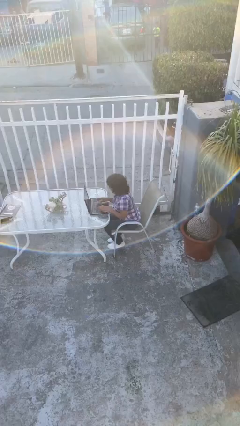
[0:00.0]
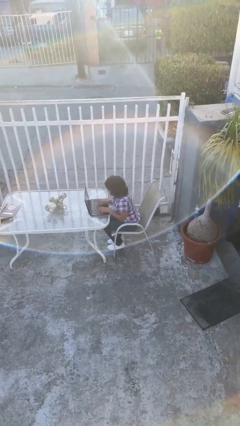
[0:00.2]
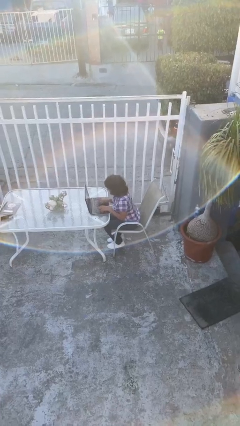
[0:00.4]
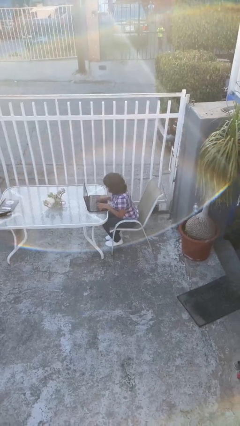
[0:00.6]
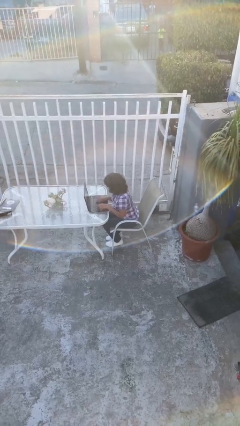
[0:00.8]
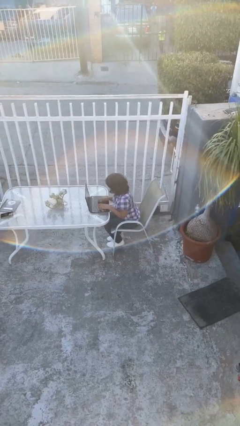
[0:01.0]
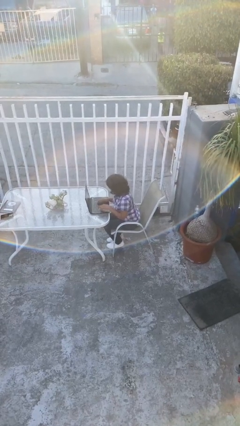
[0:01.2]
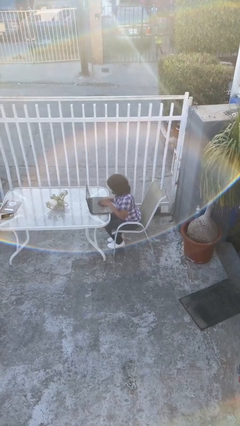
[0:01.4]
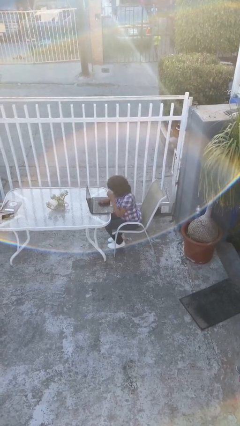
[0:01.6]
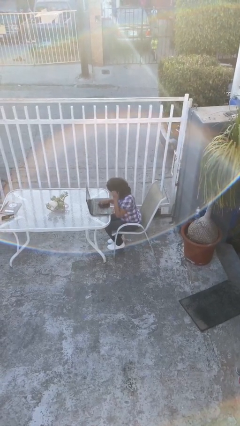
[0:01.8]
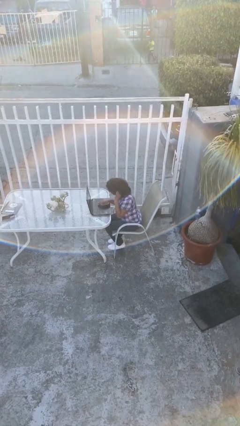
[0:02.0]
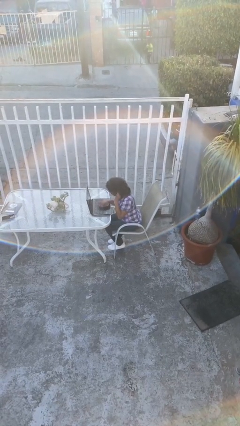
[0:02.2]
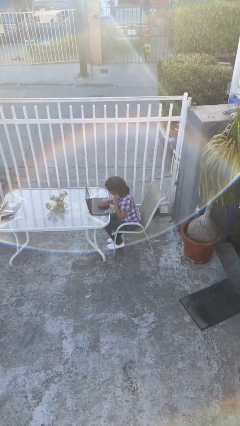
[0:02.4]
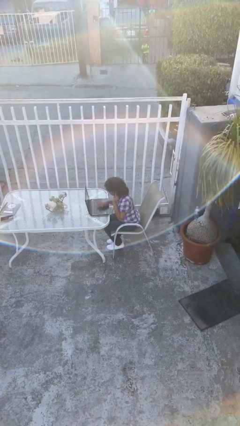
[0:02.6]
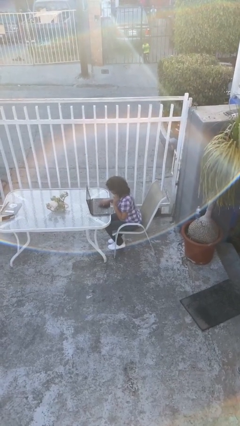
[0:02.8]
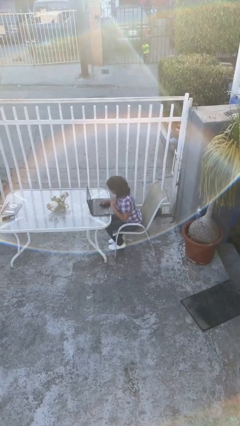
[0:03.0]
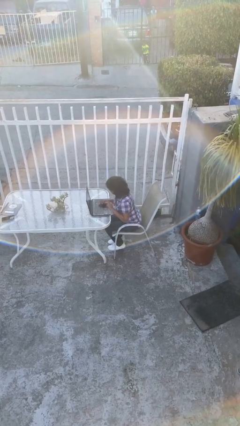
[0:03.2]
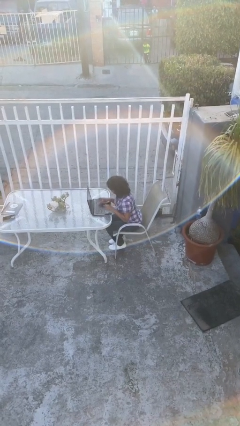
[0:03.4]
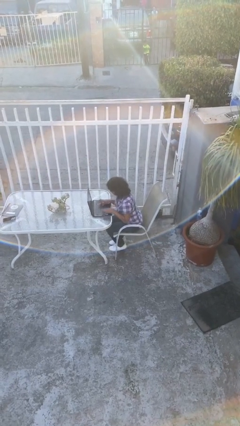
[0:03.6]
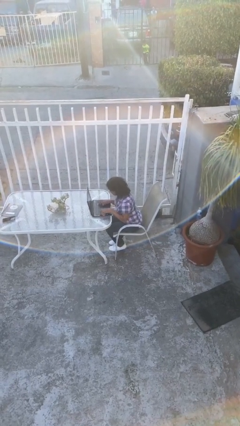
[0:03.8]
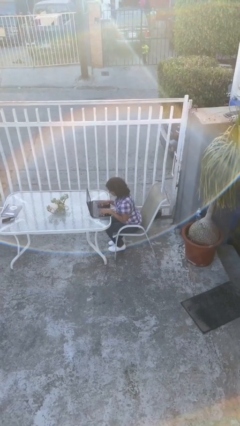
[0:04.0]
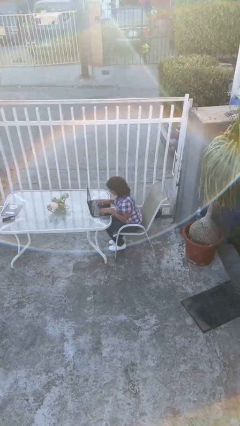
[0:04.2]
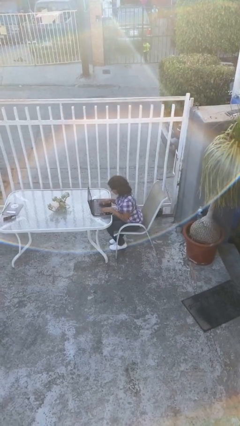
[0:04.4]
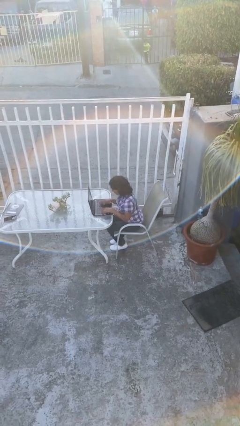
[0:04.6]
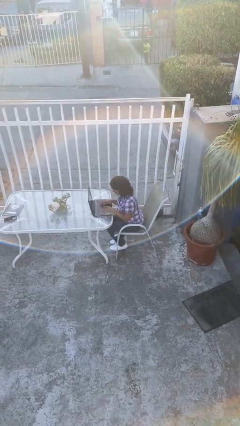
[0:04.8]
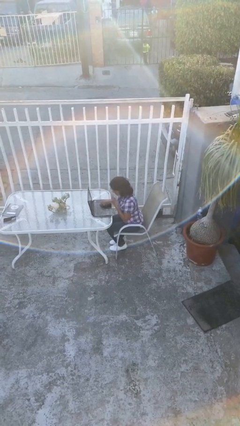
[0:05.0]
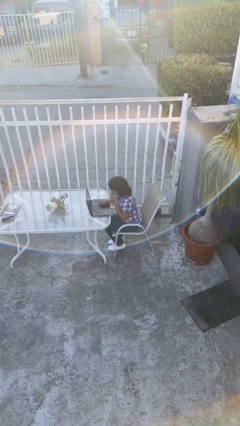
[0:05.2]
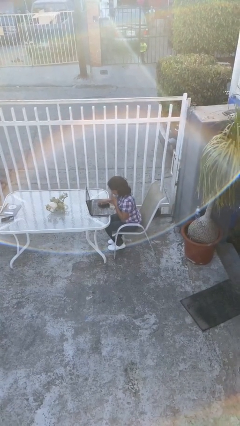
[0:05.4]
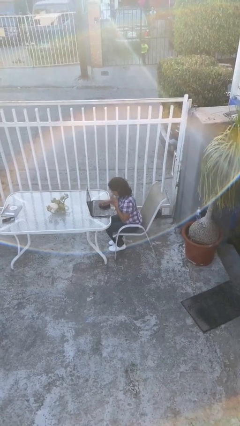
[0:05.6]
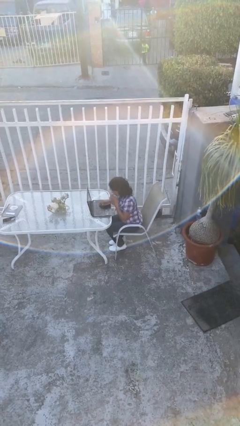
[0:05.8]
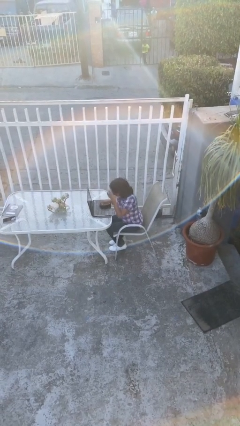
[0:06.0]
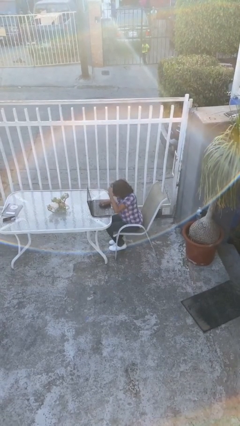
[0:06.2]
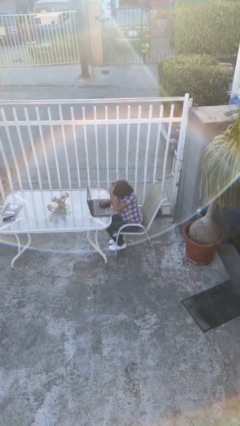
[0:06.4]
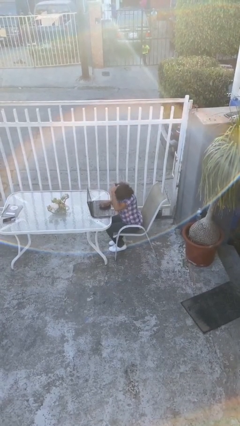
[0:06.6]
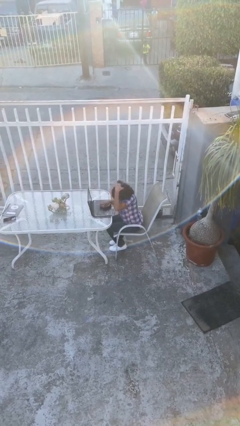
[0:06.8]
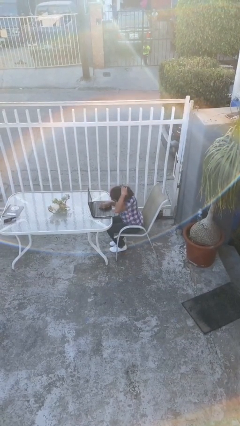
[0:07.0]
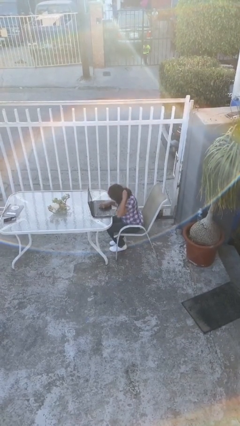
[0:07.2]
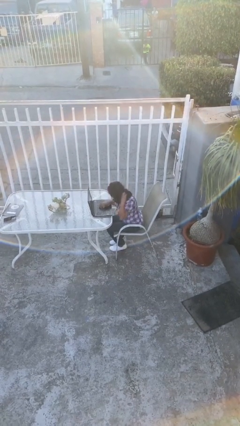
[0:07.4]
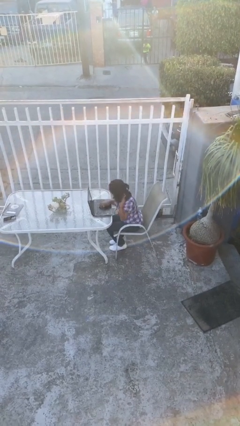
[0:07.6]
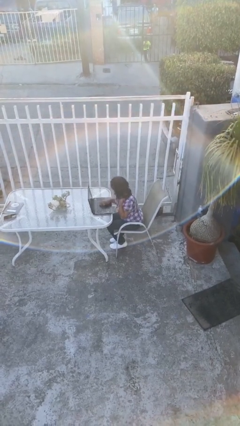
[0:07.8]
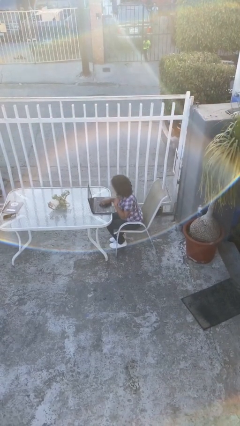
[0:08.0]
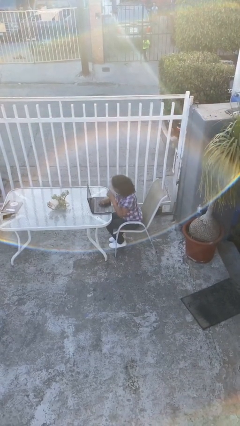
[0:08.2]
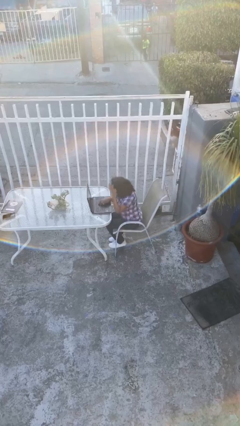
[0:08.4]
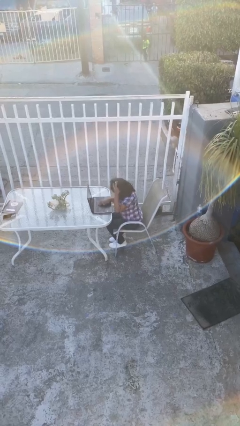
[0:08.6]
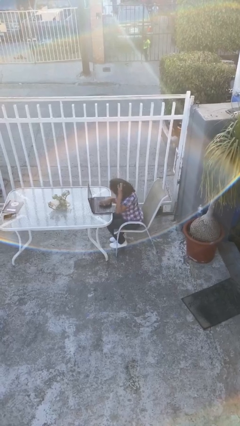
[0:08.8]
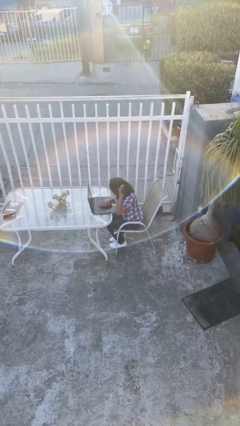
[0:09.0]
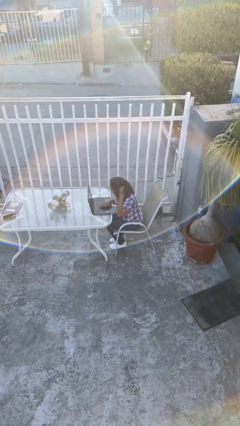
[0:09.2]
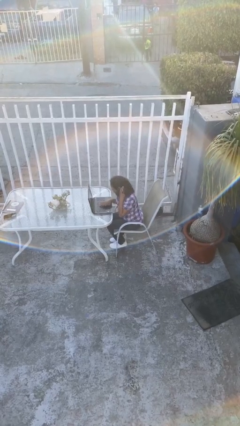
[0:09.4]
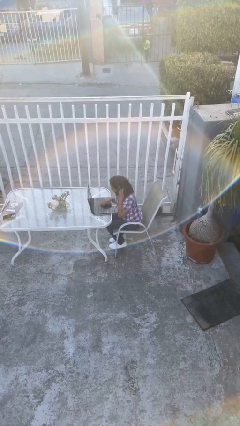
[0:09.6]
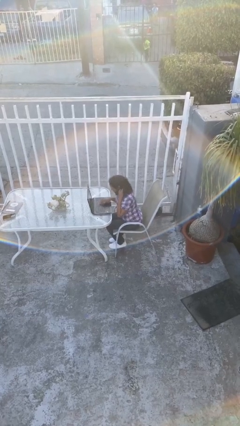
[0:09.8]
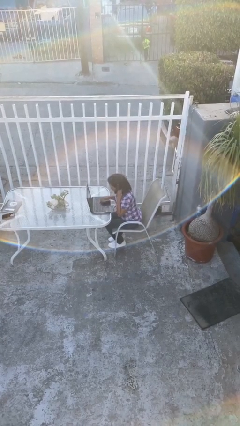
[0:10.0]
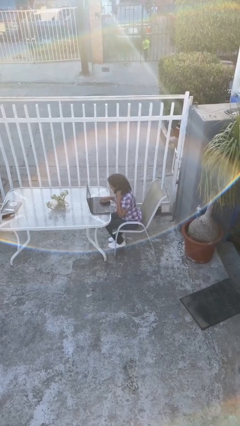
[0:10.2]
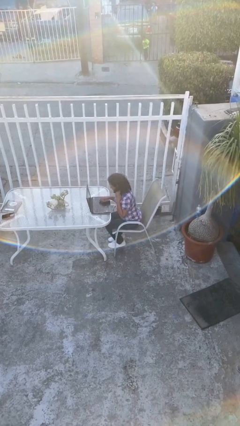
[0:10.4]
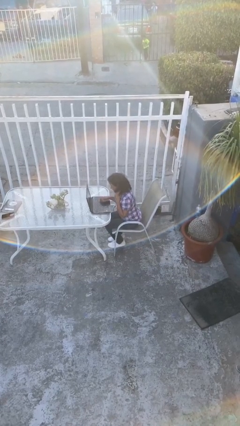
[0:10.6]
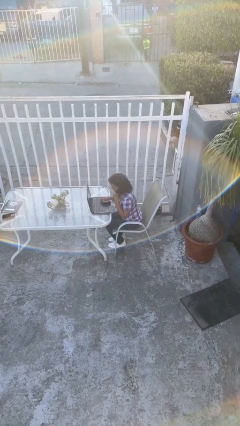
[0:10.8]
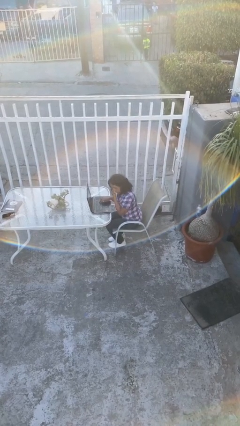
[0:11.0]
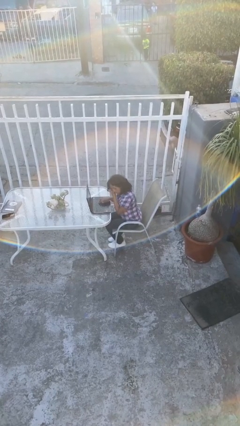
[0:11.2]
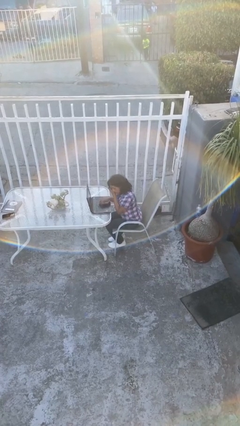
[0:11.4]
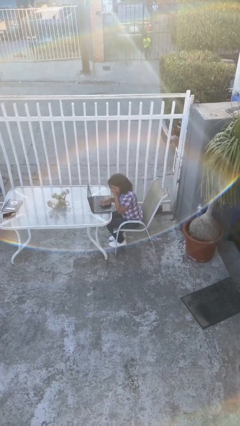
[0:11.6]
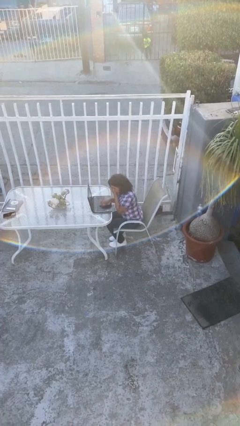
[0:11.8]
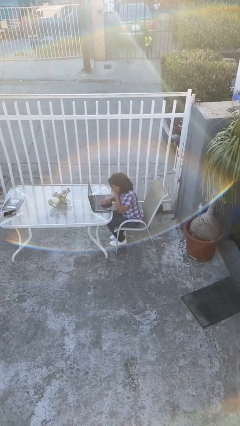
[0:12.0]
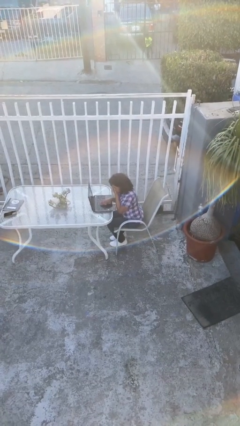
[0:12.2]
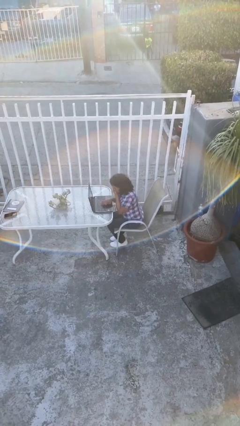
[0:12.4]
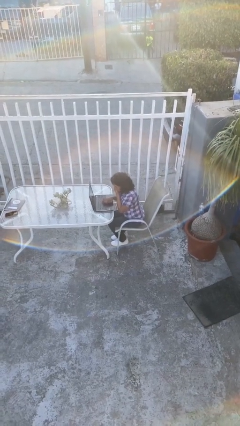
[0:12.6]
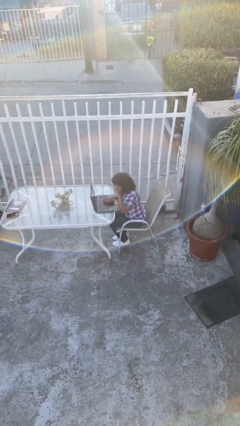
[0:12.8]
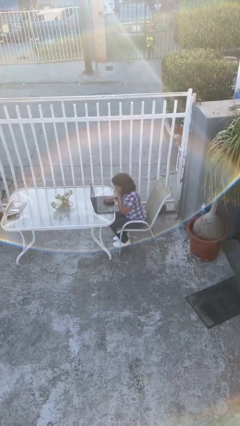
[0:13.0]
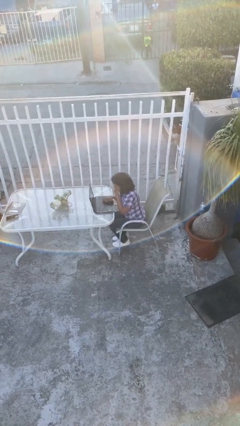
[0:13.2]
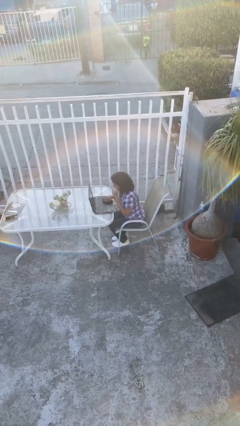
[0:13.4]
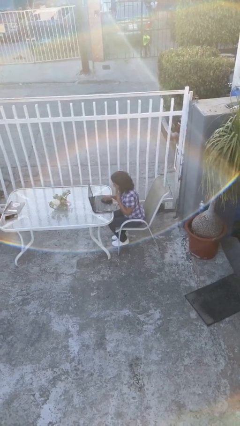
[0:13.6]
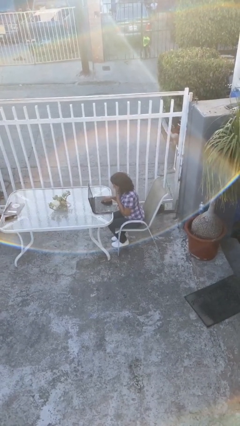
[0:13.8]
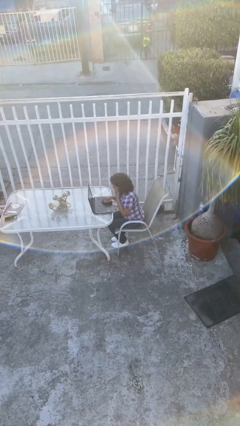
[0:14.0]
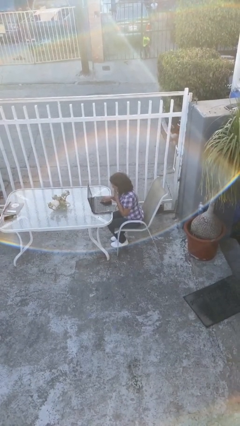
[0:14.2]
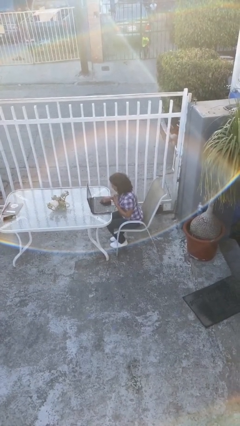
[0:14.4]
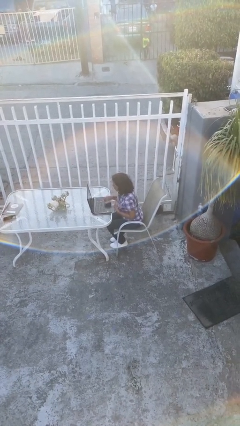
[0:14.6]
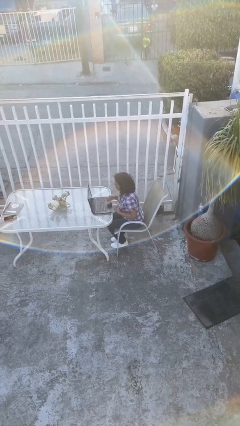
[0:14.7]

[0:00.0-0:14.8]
person interacts with laptop

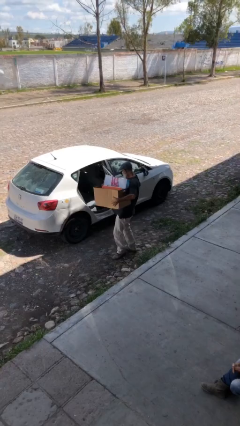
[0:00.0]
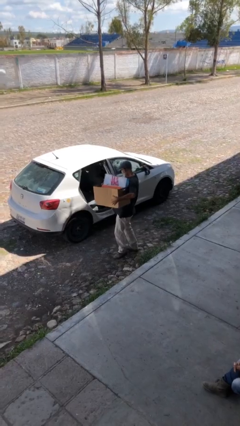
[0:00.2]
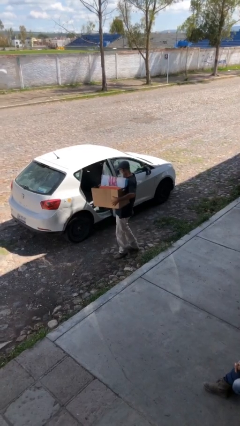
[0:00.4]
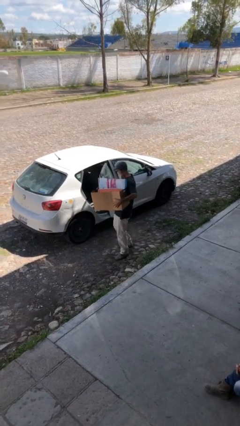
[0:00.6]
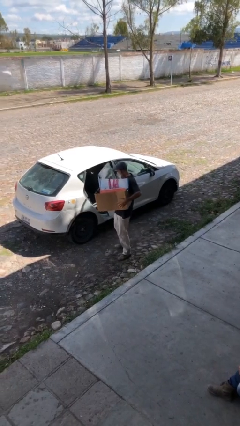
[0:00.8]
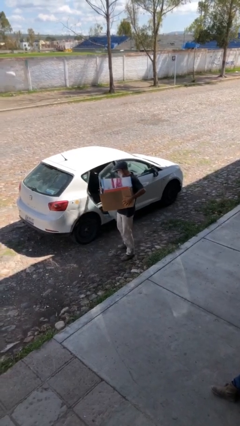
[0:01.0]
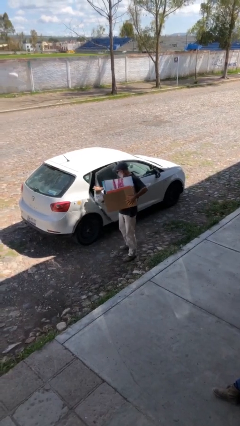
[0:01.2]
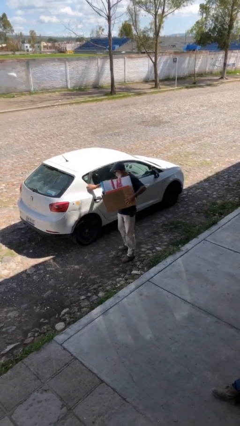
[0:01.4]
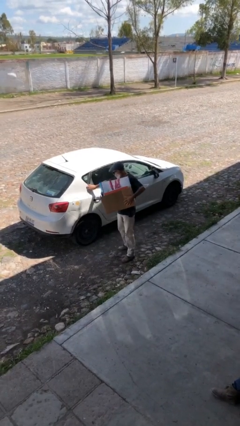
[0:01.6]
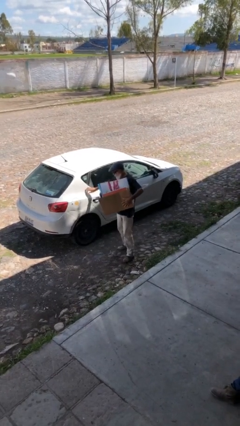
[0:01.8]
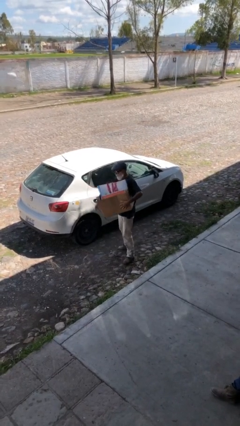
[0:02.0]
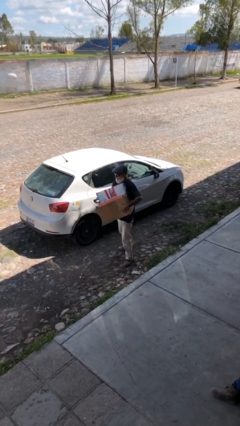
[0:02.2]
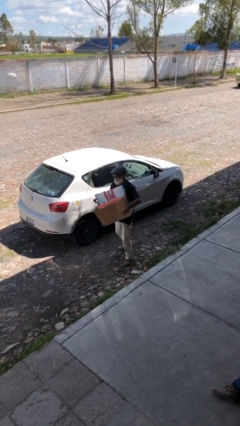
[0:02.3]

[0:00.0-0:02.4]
person closes car door

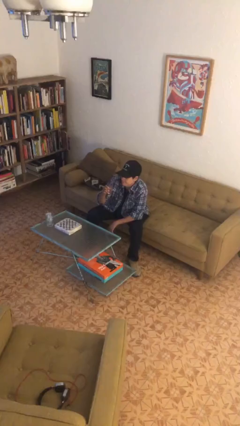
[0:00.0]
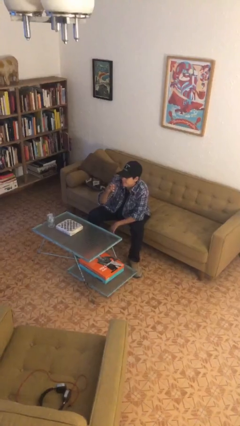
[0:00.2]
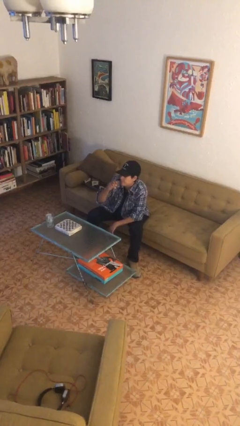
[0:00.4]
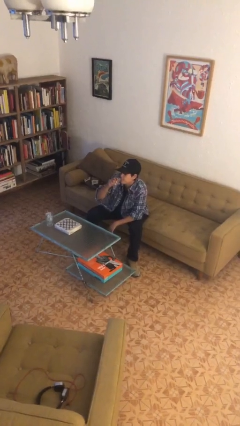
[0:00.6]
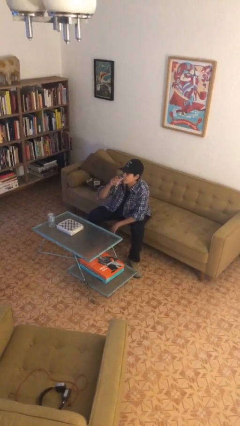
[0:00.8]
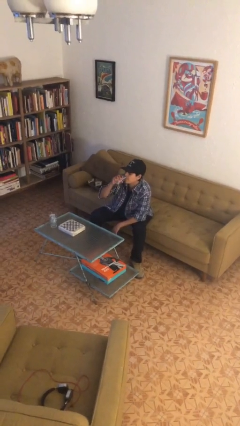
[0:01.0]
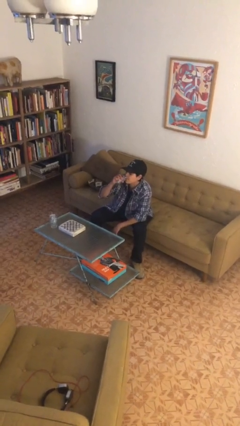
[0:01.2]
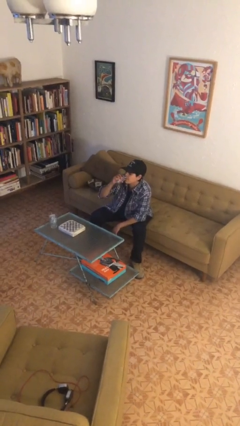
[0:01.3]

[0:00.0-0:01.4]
person drinks from shotglass
